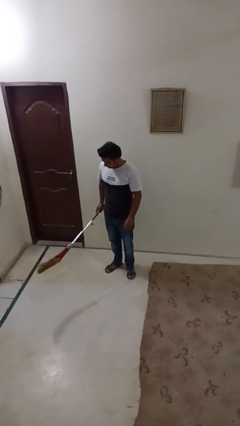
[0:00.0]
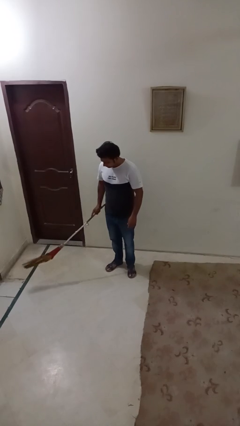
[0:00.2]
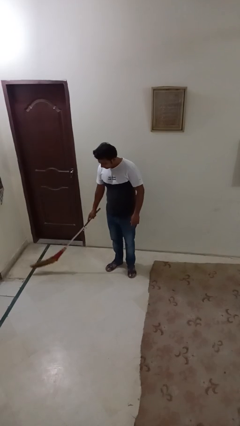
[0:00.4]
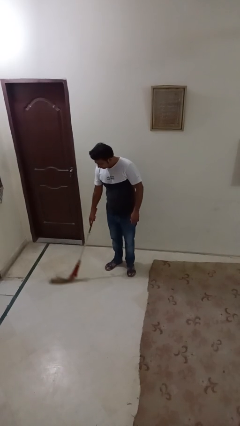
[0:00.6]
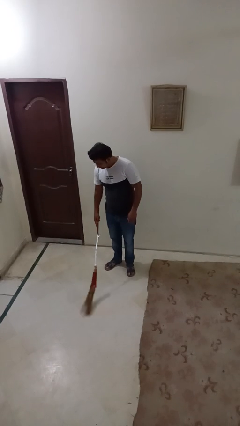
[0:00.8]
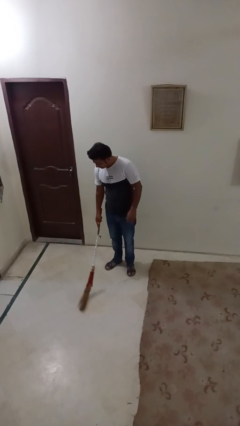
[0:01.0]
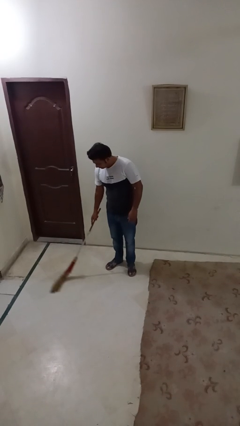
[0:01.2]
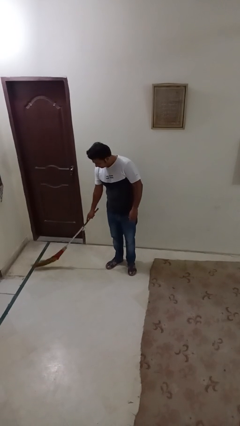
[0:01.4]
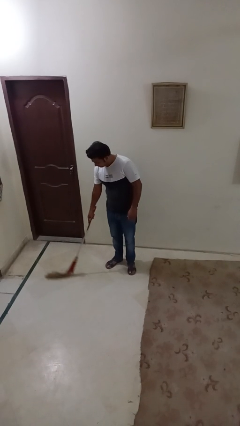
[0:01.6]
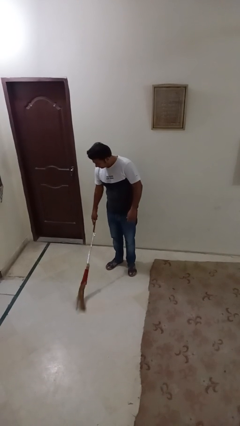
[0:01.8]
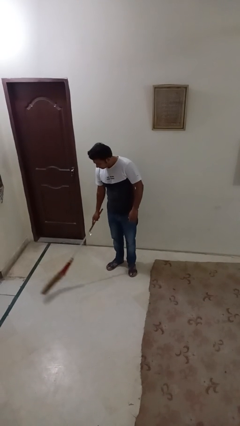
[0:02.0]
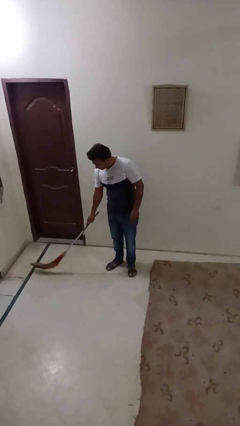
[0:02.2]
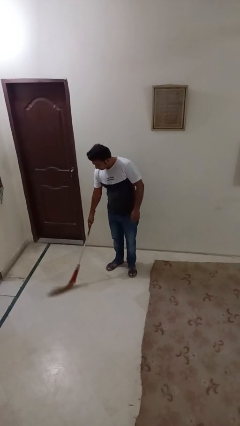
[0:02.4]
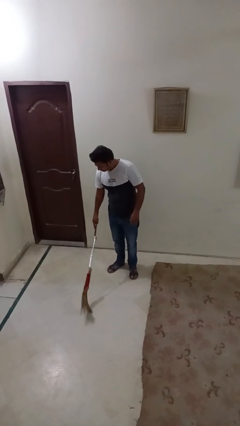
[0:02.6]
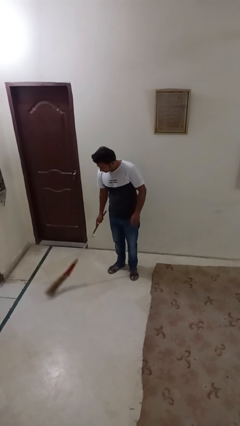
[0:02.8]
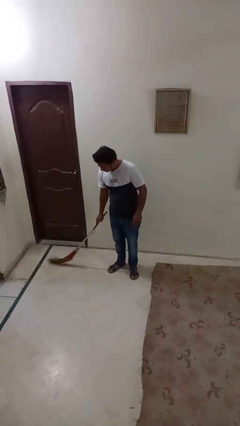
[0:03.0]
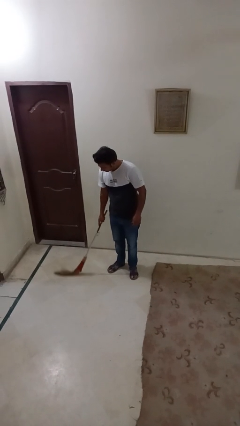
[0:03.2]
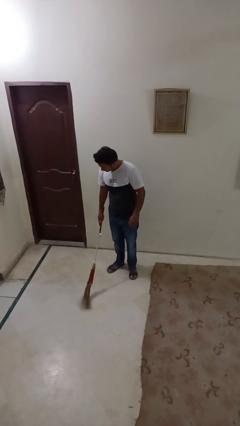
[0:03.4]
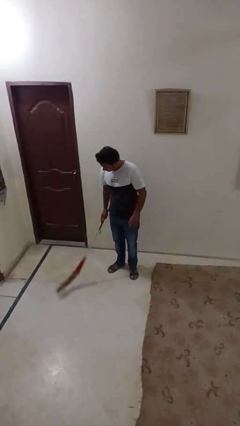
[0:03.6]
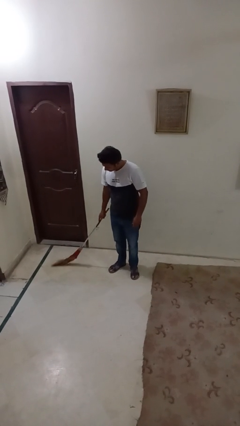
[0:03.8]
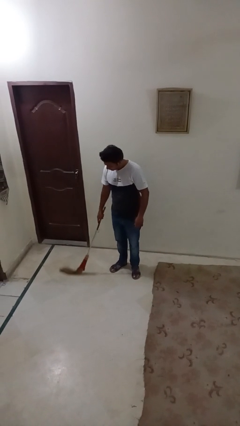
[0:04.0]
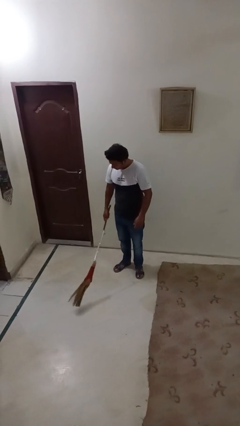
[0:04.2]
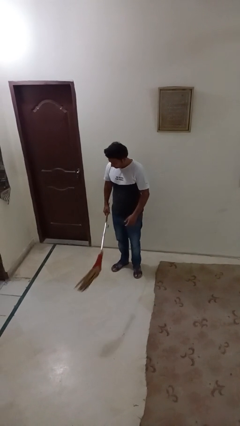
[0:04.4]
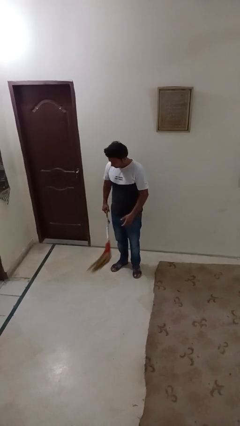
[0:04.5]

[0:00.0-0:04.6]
person sweeps floor

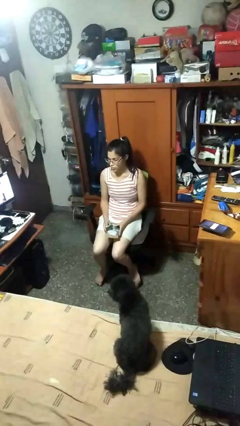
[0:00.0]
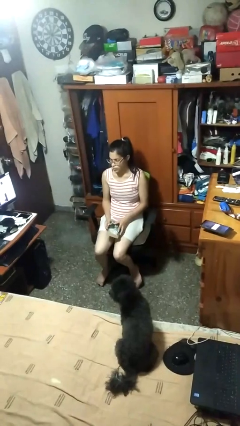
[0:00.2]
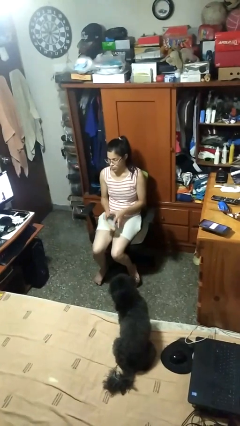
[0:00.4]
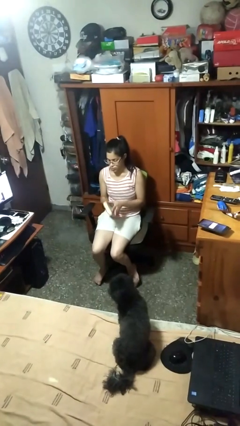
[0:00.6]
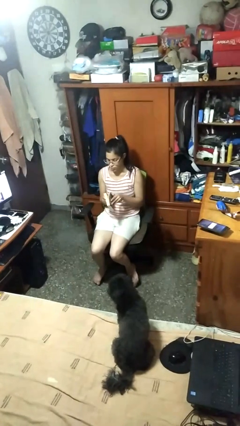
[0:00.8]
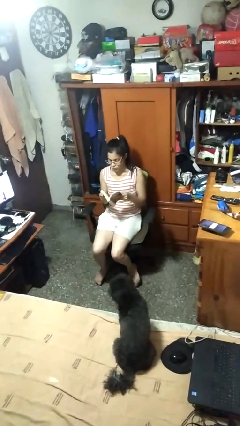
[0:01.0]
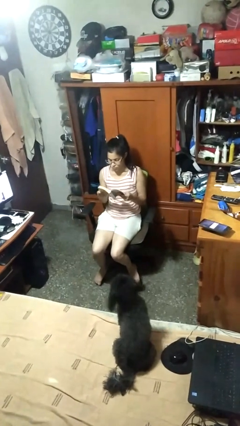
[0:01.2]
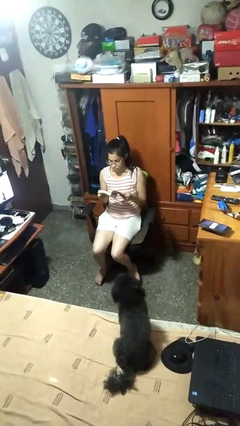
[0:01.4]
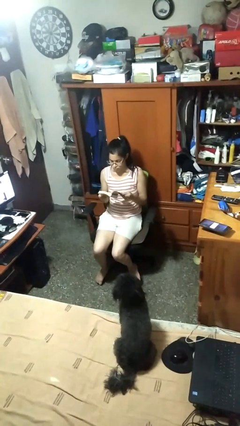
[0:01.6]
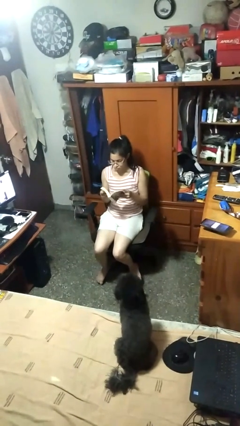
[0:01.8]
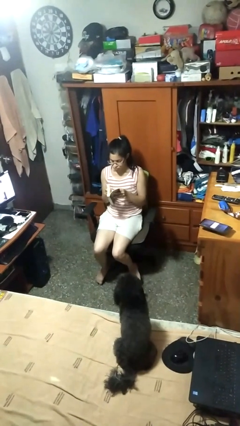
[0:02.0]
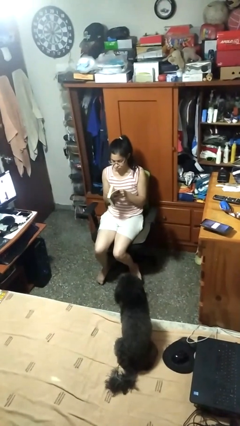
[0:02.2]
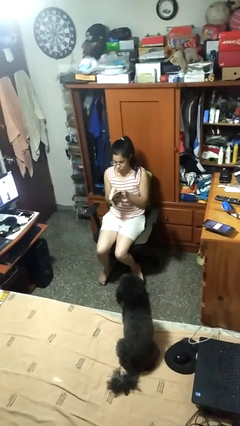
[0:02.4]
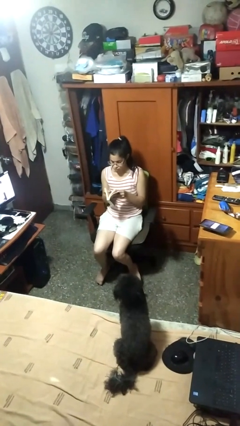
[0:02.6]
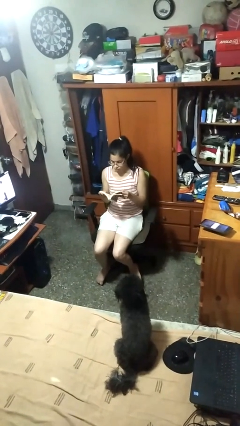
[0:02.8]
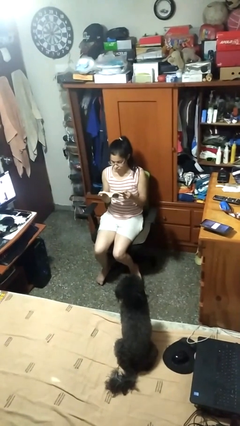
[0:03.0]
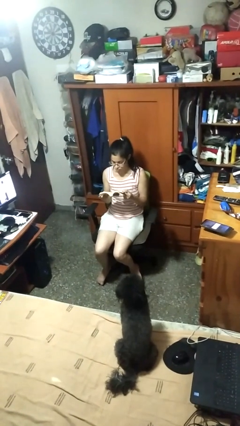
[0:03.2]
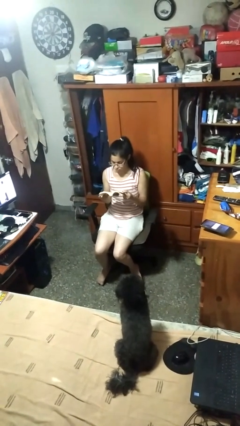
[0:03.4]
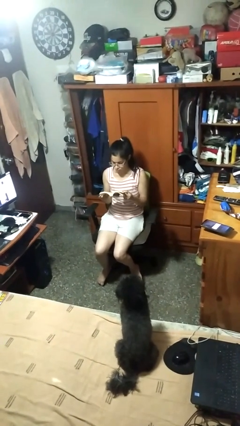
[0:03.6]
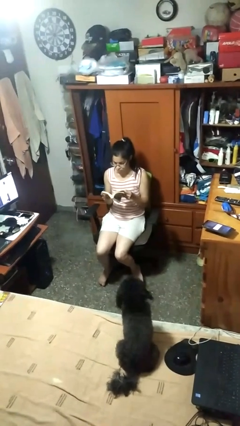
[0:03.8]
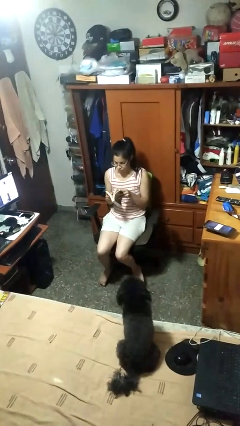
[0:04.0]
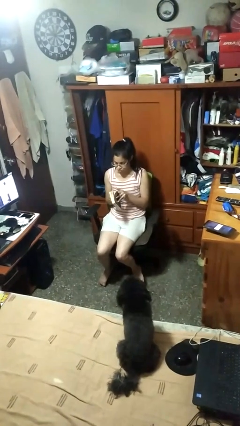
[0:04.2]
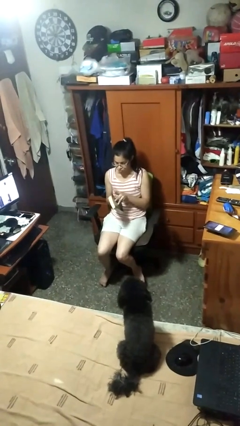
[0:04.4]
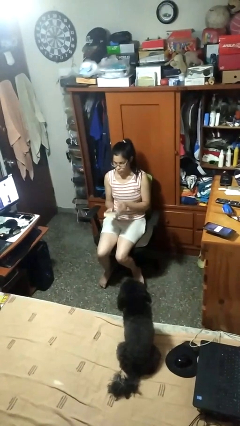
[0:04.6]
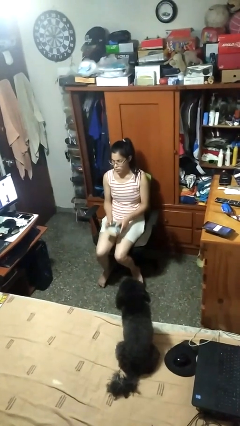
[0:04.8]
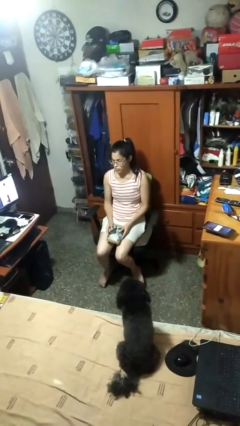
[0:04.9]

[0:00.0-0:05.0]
person reads book

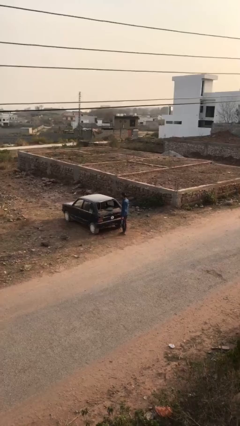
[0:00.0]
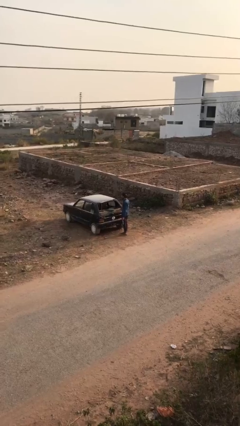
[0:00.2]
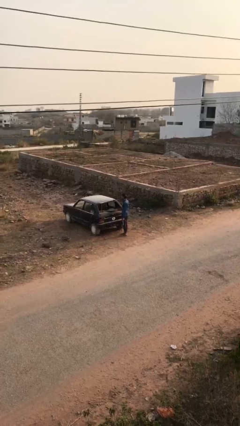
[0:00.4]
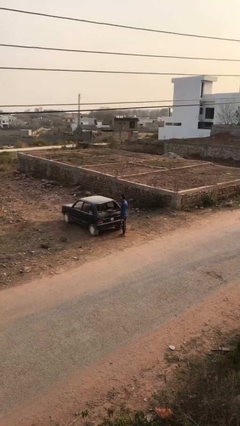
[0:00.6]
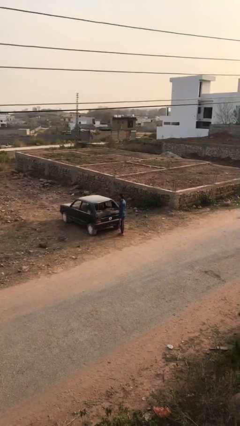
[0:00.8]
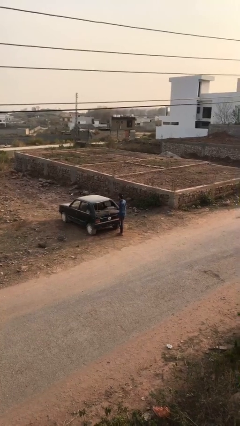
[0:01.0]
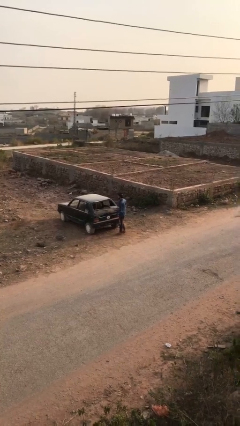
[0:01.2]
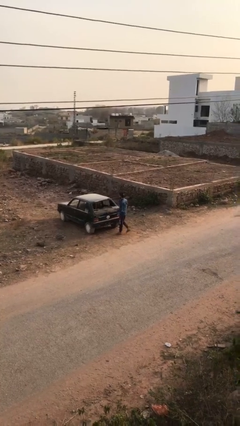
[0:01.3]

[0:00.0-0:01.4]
person unloads car

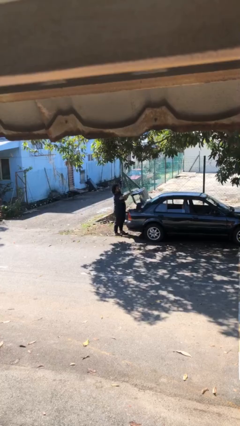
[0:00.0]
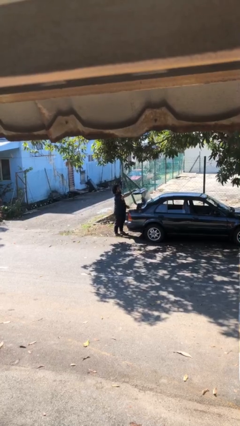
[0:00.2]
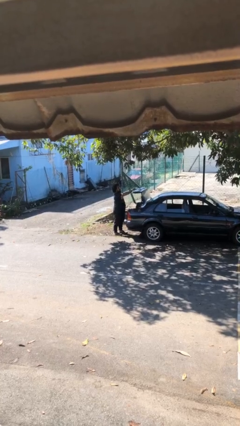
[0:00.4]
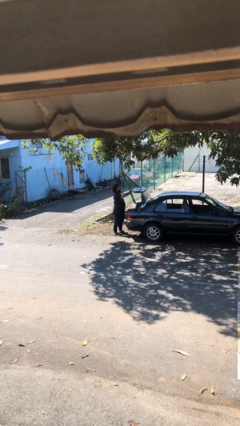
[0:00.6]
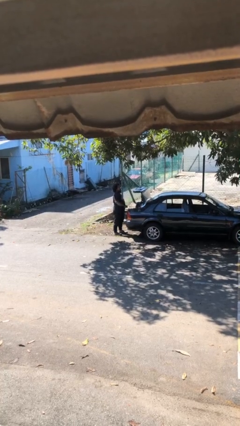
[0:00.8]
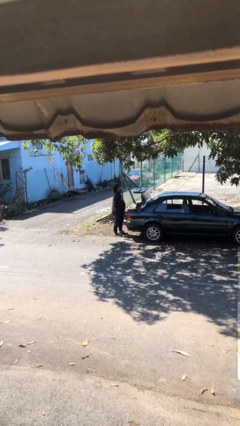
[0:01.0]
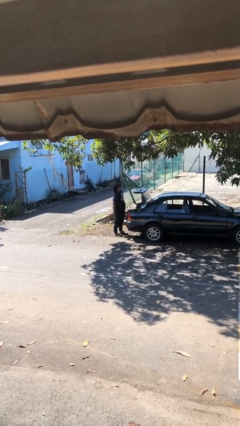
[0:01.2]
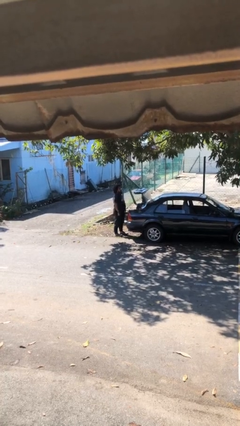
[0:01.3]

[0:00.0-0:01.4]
person opens car trunk

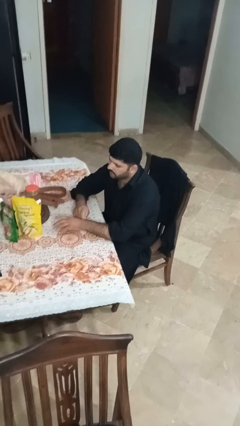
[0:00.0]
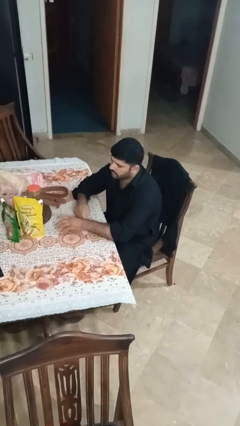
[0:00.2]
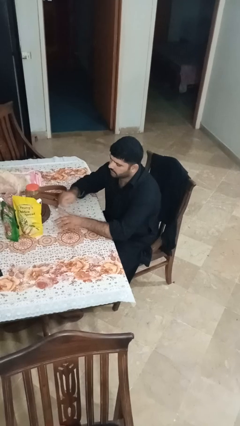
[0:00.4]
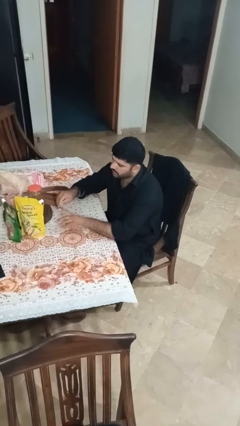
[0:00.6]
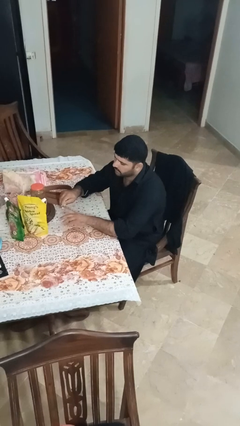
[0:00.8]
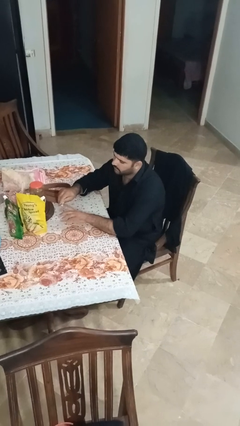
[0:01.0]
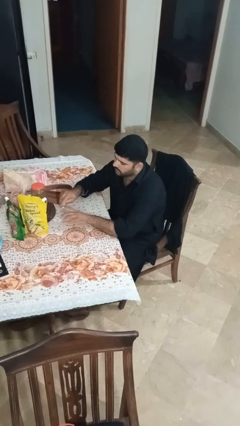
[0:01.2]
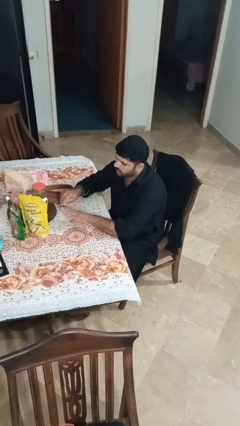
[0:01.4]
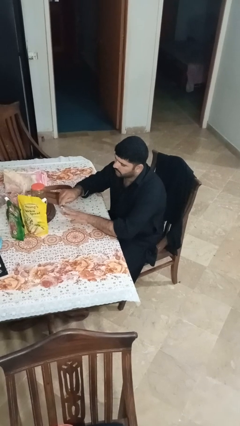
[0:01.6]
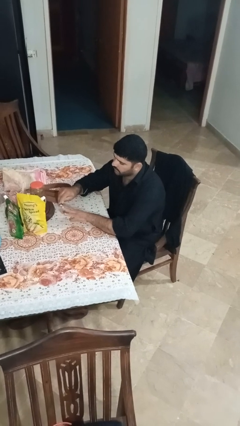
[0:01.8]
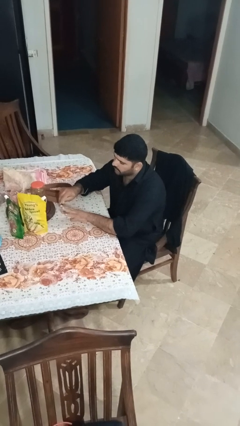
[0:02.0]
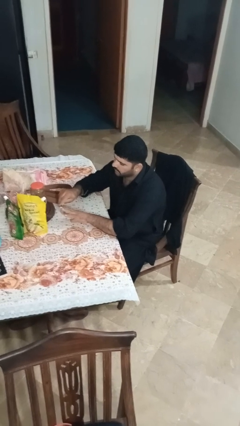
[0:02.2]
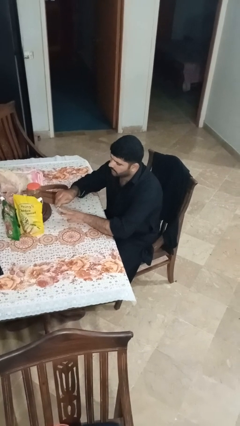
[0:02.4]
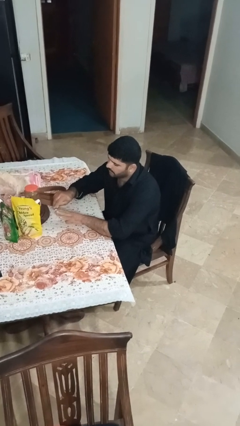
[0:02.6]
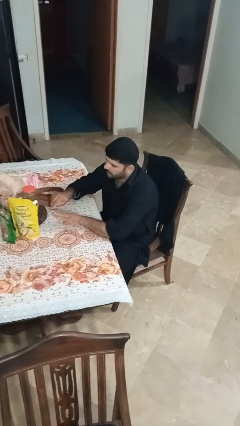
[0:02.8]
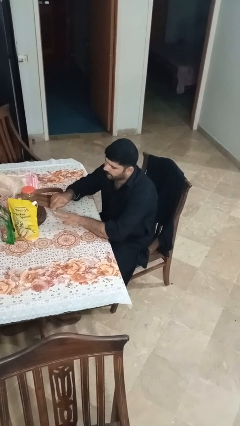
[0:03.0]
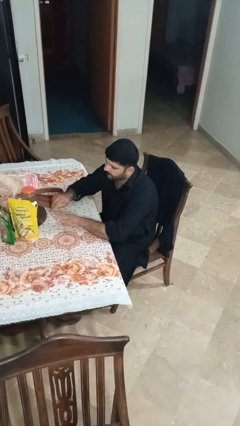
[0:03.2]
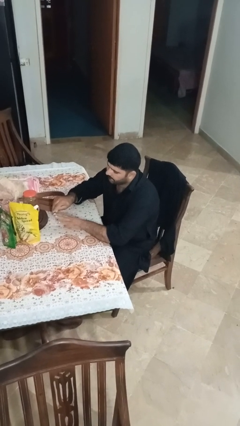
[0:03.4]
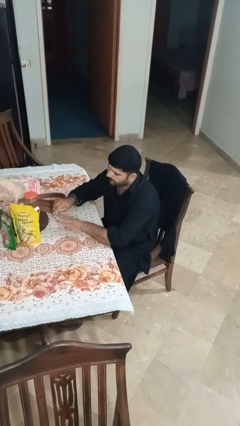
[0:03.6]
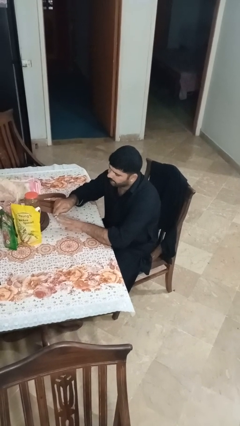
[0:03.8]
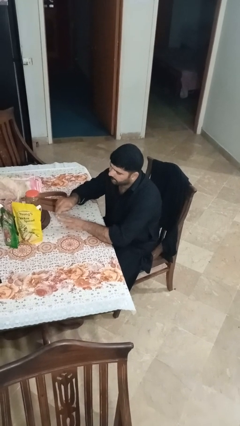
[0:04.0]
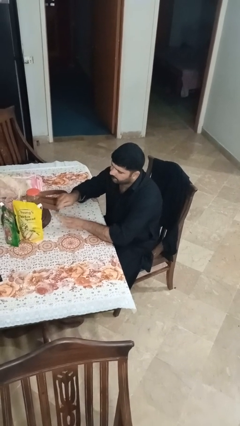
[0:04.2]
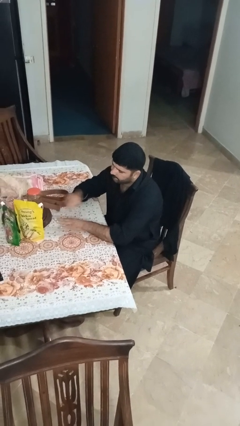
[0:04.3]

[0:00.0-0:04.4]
person files fingernails

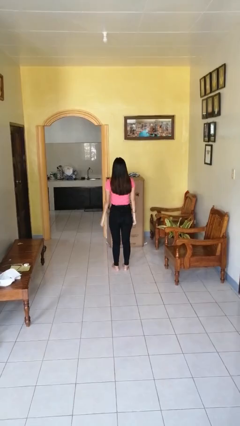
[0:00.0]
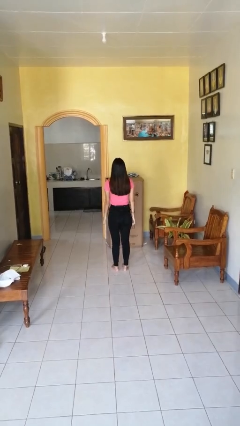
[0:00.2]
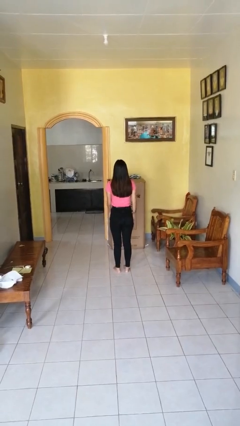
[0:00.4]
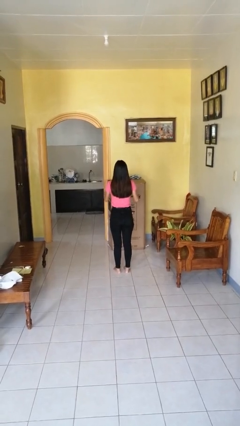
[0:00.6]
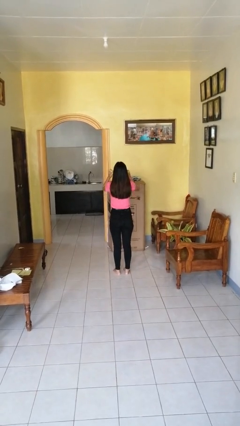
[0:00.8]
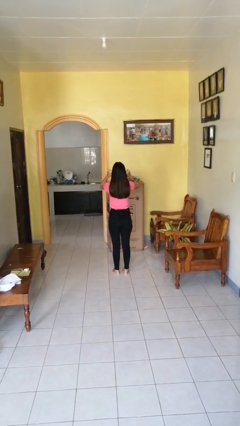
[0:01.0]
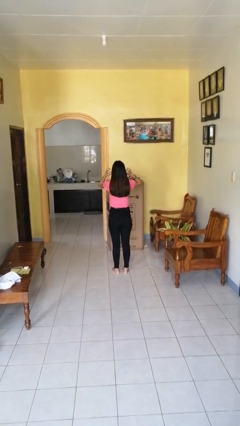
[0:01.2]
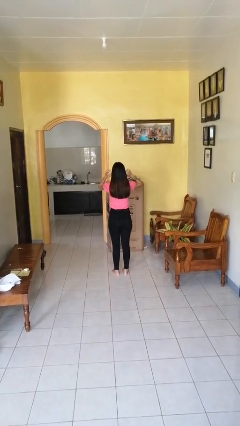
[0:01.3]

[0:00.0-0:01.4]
person puts fingers in ear
